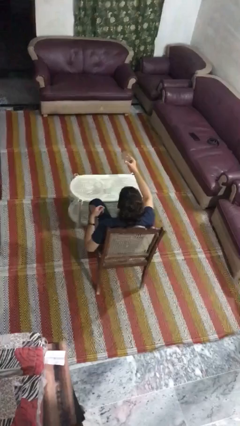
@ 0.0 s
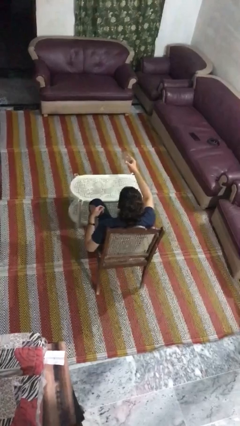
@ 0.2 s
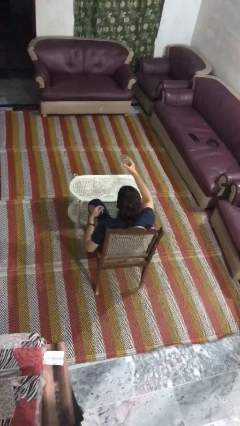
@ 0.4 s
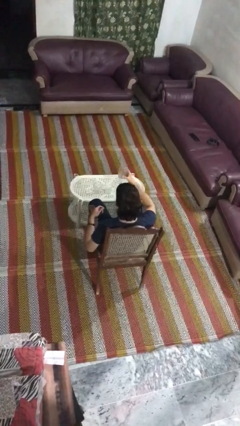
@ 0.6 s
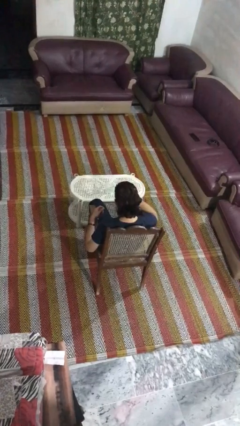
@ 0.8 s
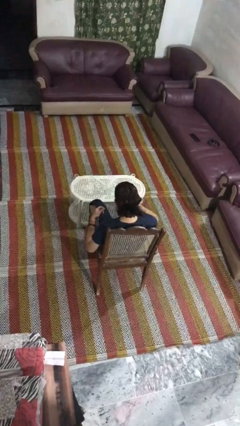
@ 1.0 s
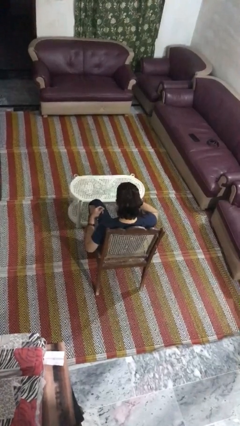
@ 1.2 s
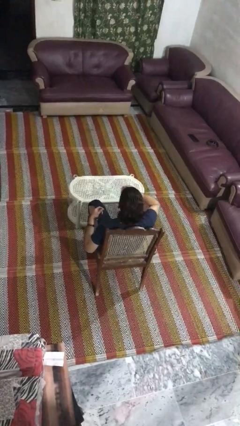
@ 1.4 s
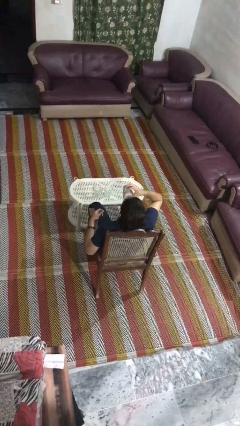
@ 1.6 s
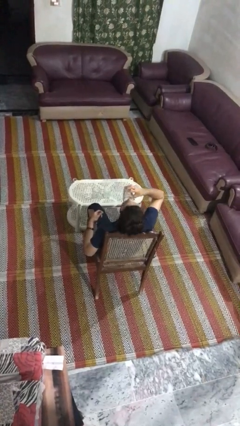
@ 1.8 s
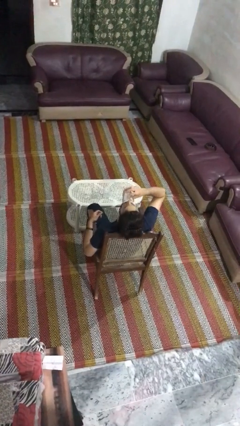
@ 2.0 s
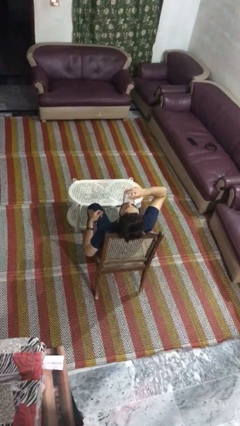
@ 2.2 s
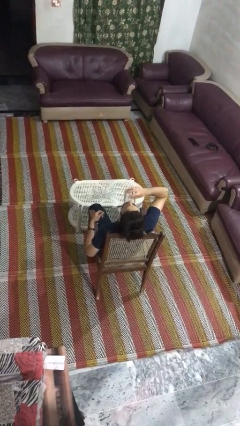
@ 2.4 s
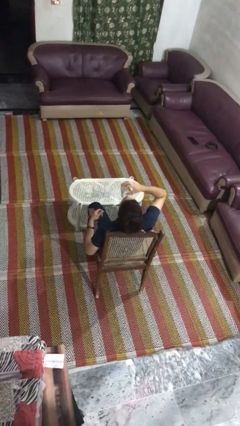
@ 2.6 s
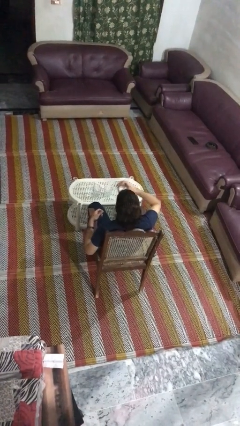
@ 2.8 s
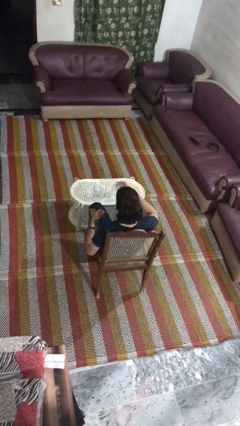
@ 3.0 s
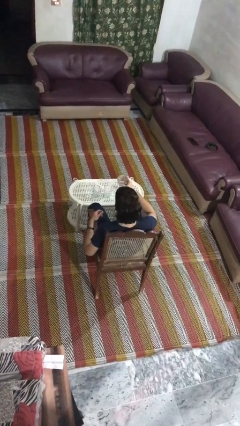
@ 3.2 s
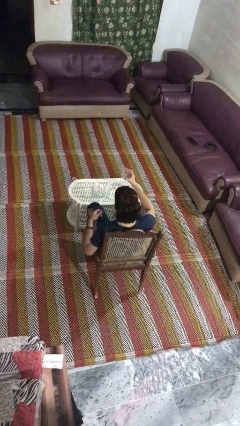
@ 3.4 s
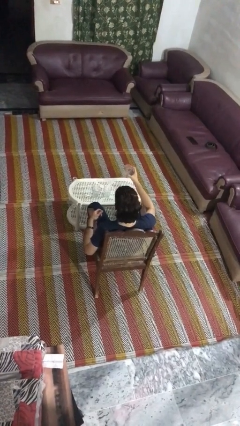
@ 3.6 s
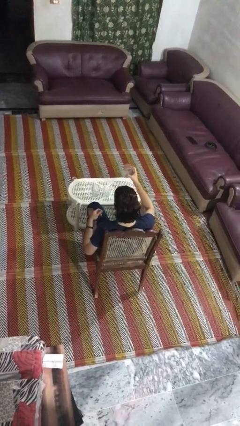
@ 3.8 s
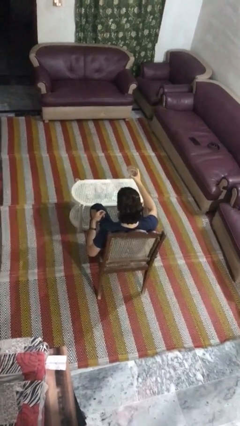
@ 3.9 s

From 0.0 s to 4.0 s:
person drinks from shotglass

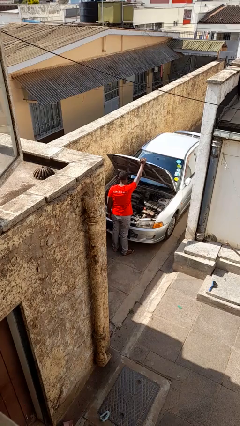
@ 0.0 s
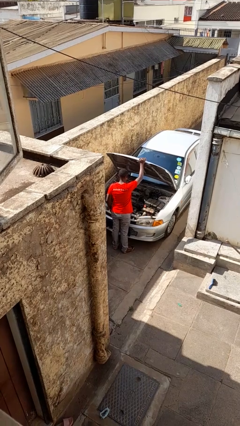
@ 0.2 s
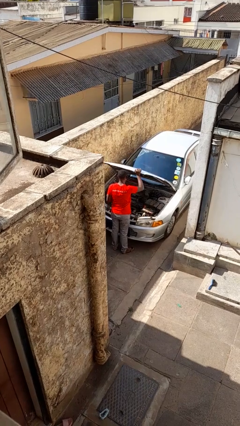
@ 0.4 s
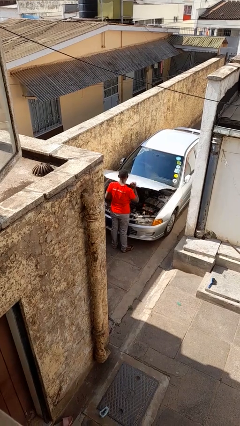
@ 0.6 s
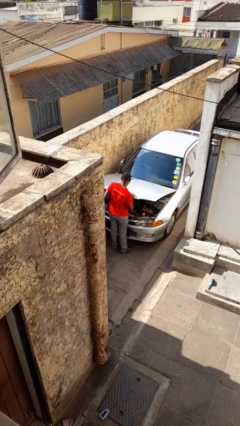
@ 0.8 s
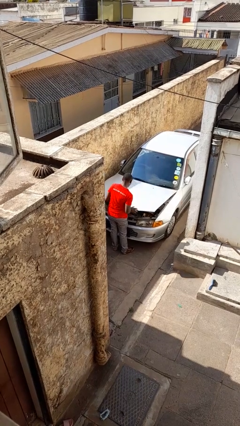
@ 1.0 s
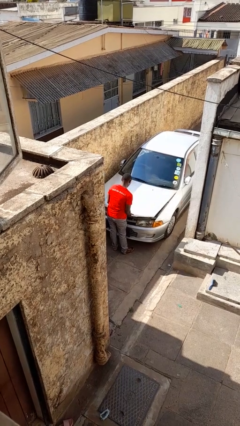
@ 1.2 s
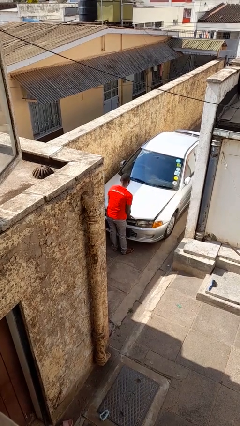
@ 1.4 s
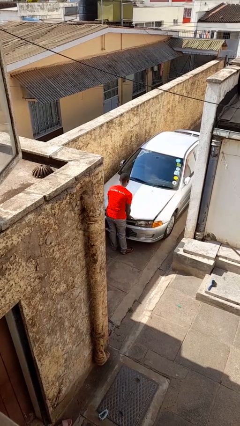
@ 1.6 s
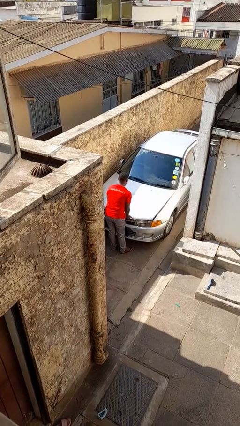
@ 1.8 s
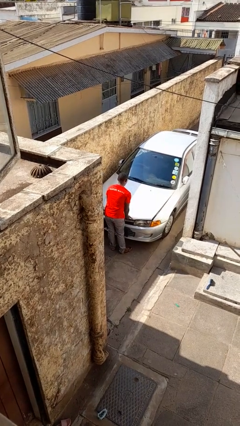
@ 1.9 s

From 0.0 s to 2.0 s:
person closes car hood

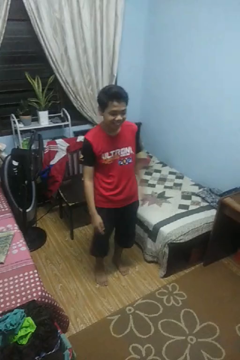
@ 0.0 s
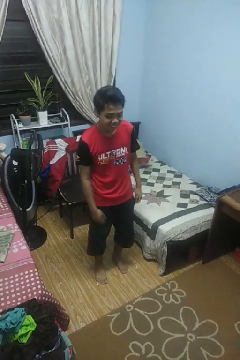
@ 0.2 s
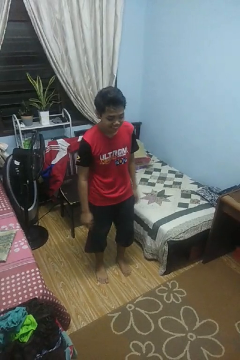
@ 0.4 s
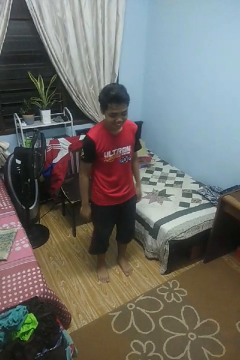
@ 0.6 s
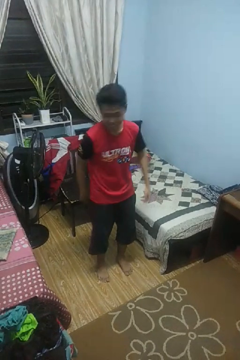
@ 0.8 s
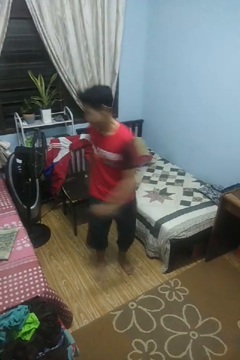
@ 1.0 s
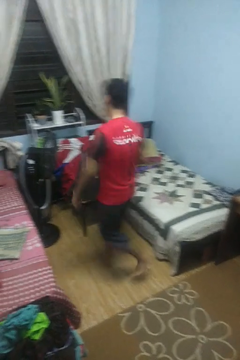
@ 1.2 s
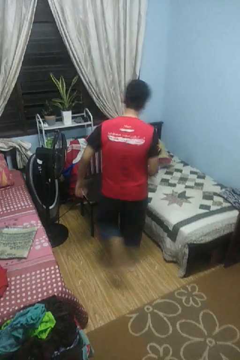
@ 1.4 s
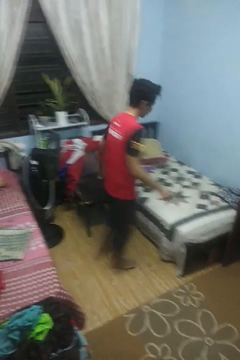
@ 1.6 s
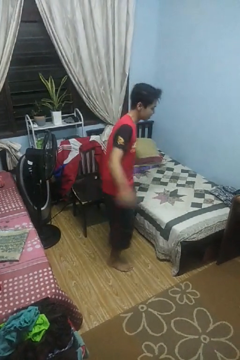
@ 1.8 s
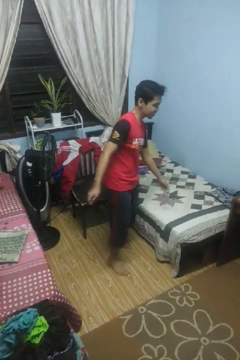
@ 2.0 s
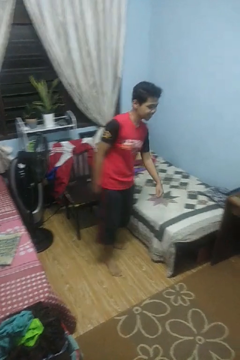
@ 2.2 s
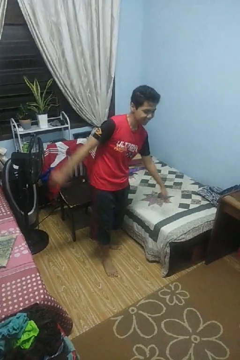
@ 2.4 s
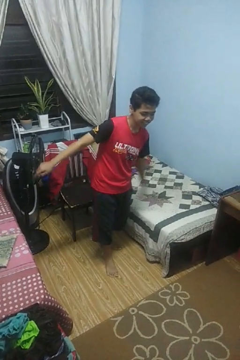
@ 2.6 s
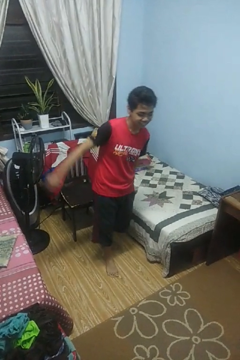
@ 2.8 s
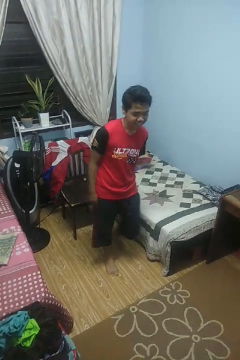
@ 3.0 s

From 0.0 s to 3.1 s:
person twirls

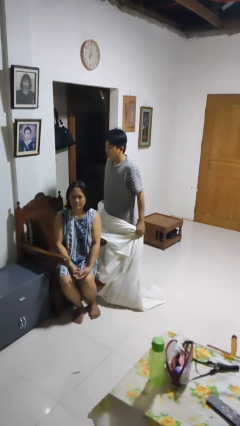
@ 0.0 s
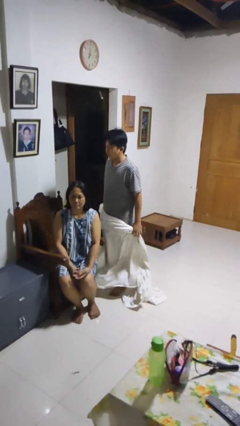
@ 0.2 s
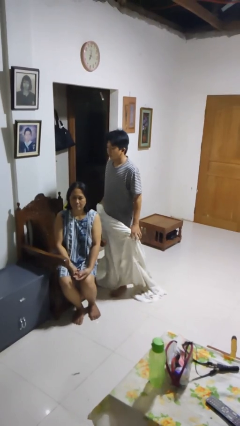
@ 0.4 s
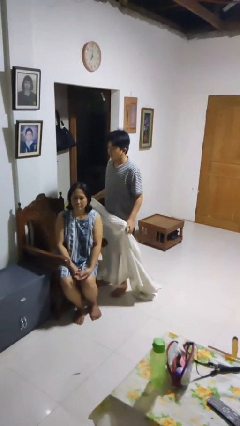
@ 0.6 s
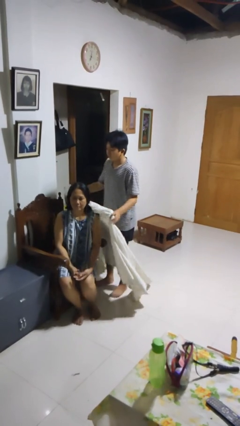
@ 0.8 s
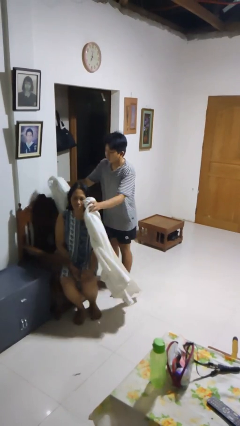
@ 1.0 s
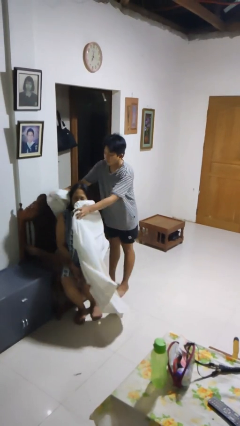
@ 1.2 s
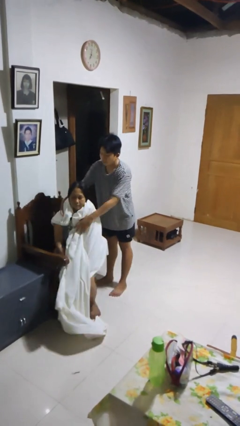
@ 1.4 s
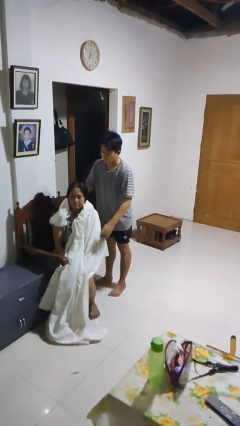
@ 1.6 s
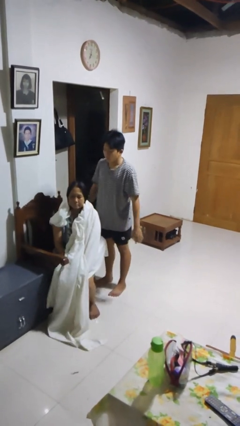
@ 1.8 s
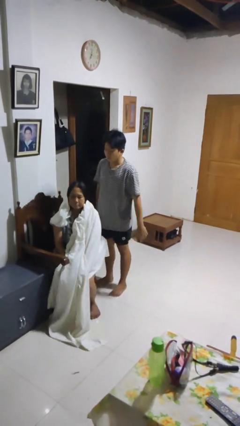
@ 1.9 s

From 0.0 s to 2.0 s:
person covers friend with blanket

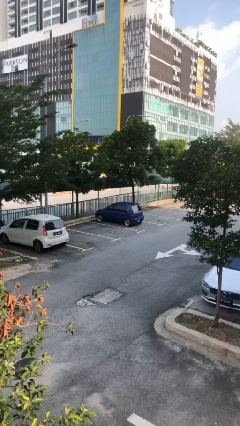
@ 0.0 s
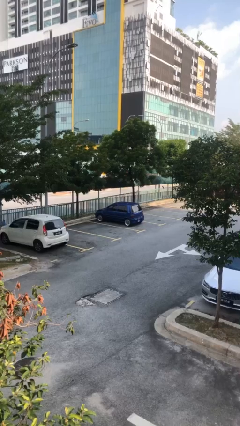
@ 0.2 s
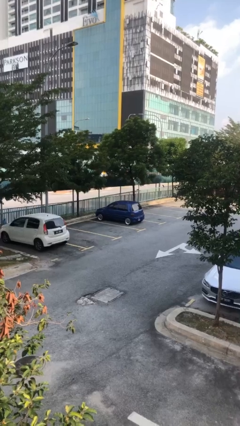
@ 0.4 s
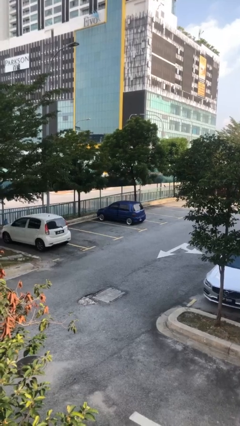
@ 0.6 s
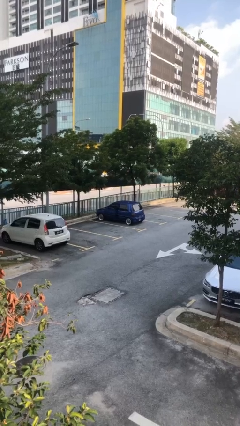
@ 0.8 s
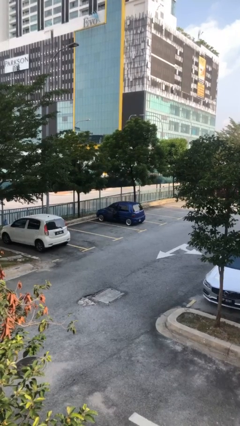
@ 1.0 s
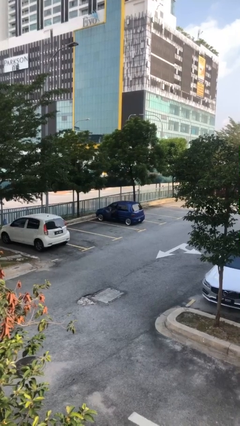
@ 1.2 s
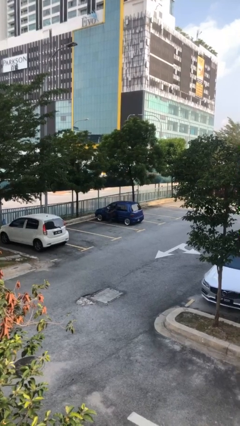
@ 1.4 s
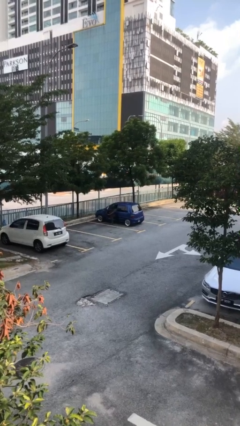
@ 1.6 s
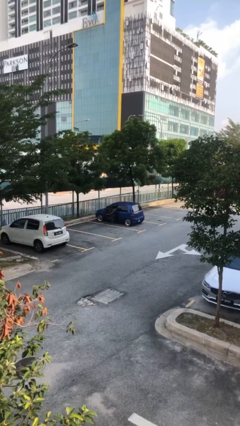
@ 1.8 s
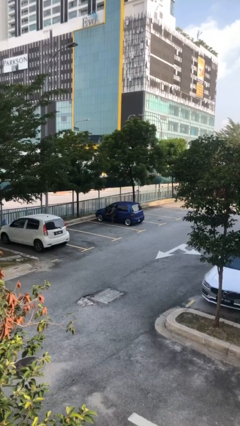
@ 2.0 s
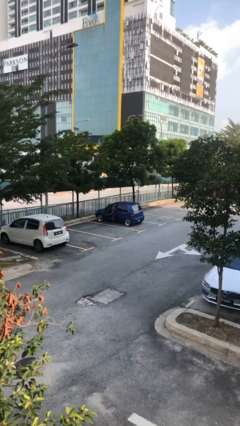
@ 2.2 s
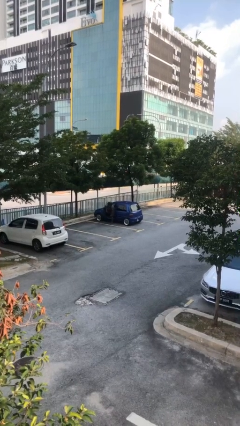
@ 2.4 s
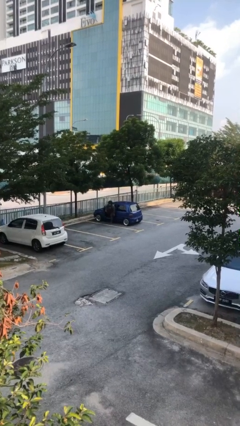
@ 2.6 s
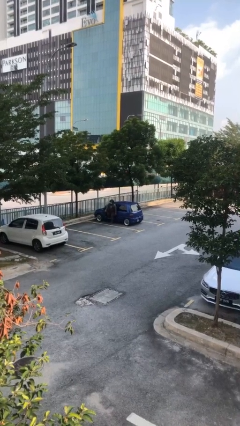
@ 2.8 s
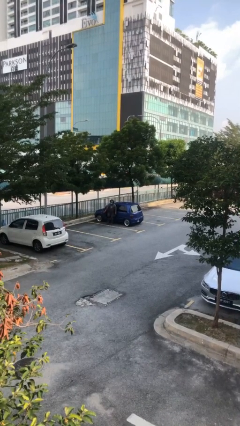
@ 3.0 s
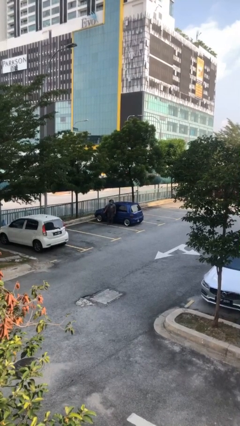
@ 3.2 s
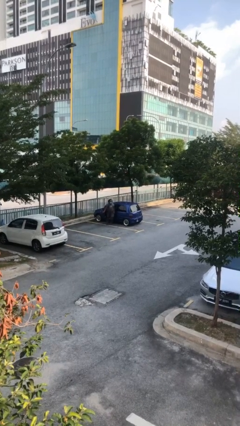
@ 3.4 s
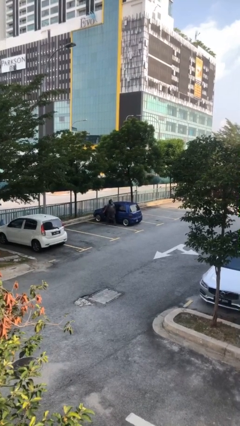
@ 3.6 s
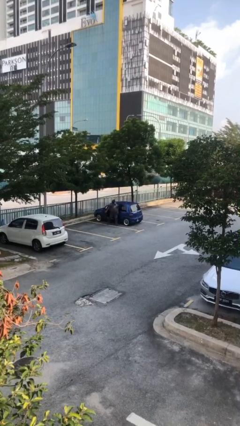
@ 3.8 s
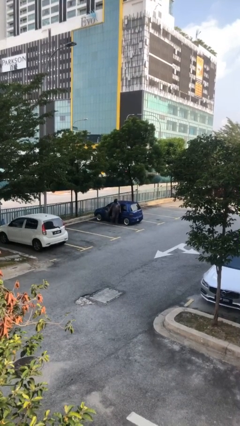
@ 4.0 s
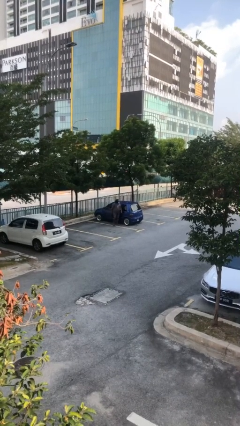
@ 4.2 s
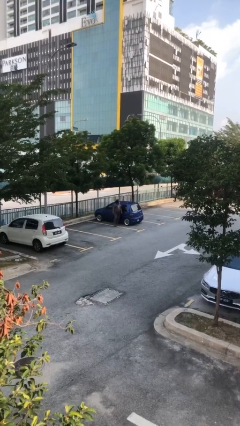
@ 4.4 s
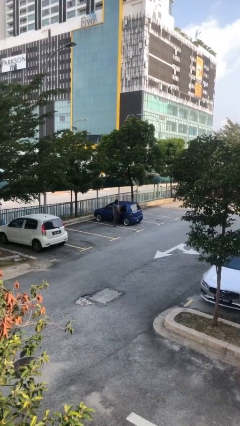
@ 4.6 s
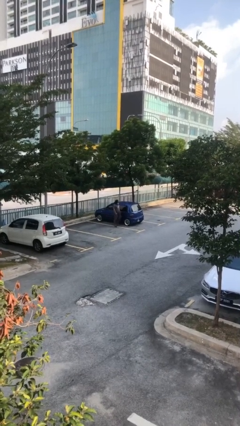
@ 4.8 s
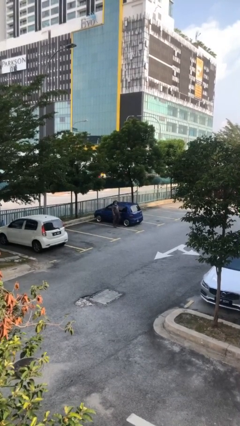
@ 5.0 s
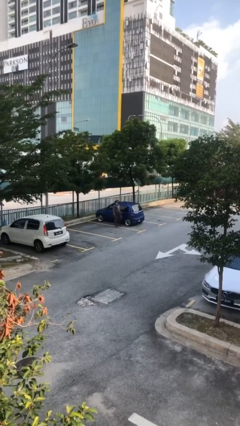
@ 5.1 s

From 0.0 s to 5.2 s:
car drops off person

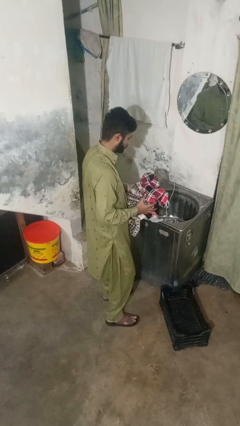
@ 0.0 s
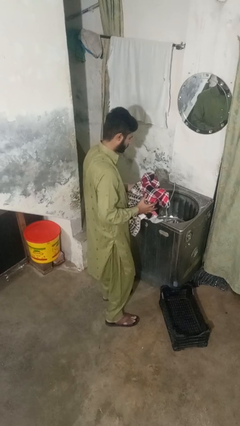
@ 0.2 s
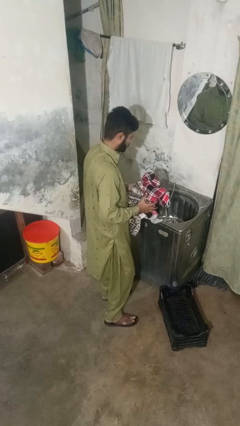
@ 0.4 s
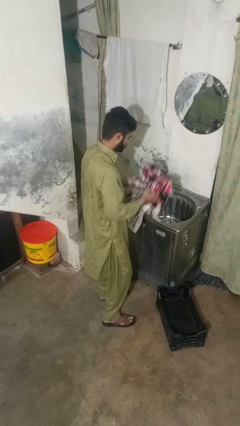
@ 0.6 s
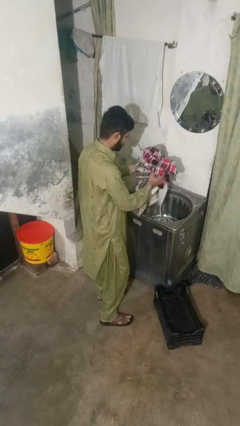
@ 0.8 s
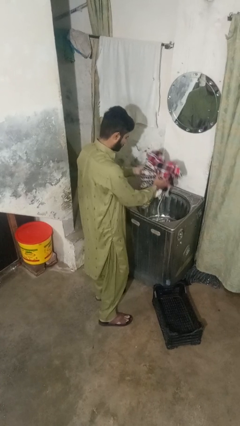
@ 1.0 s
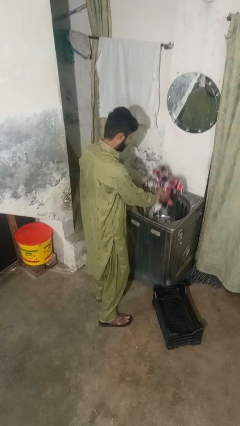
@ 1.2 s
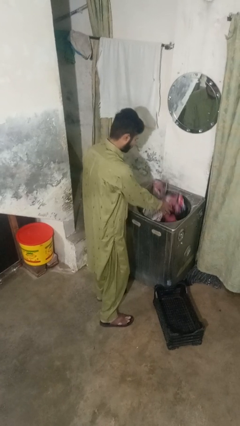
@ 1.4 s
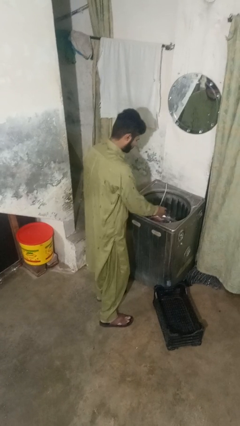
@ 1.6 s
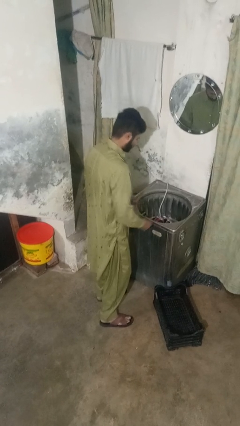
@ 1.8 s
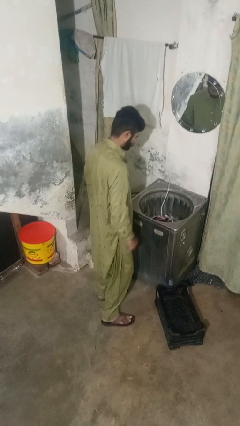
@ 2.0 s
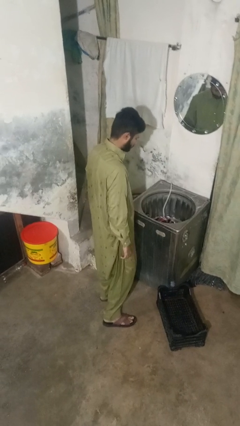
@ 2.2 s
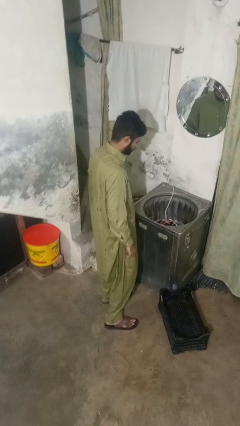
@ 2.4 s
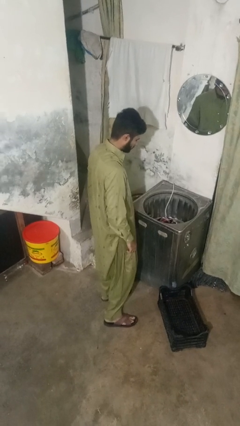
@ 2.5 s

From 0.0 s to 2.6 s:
person loads clotheswasher
